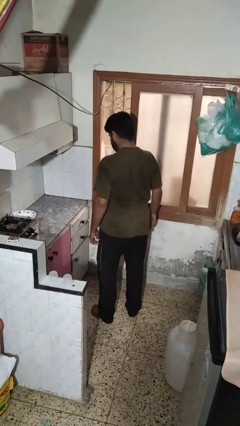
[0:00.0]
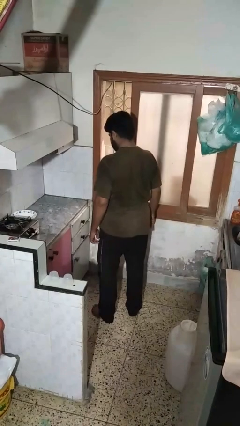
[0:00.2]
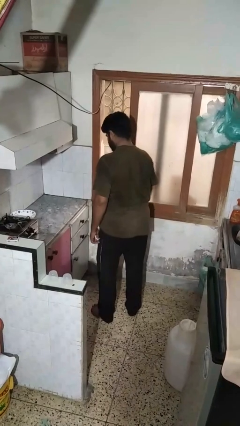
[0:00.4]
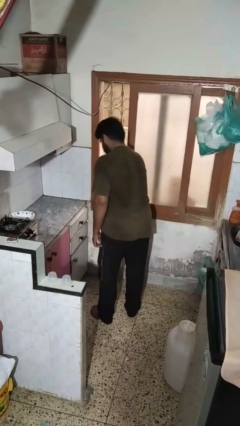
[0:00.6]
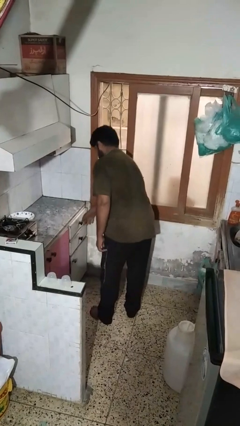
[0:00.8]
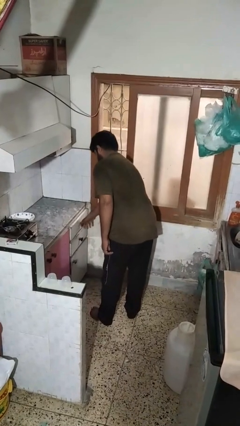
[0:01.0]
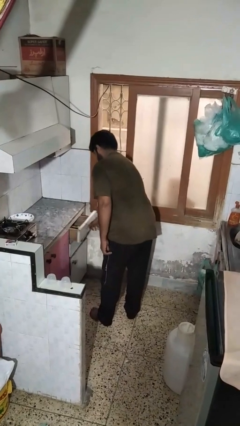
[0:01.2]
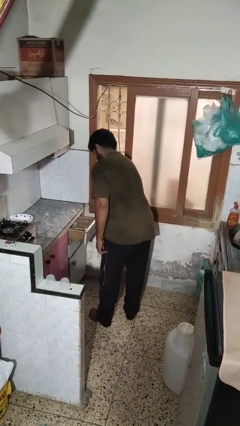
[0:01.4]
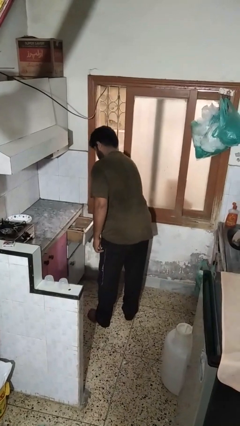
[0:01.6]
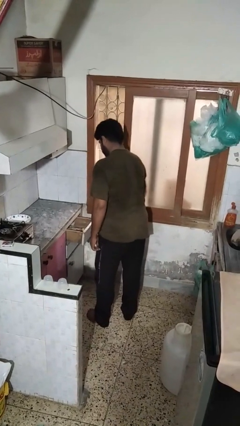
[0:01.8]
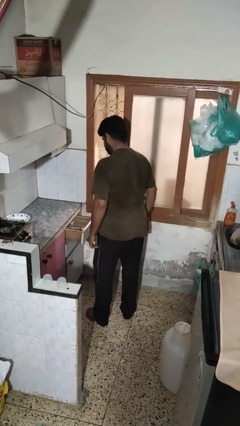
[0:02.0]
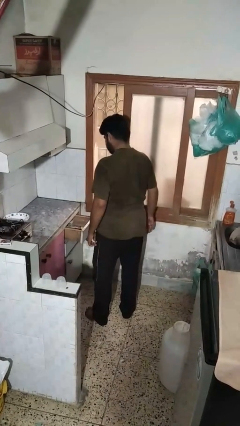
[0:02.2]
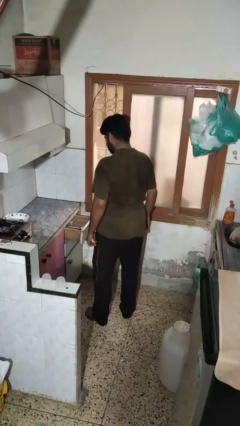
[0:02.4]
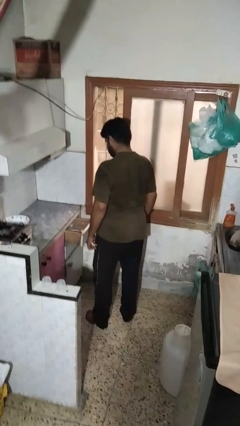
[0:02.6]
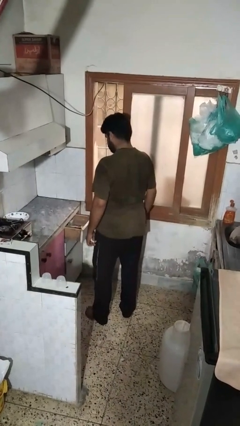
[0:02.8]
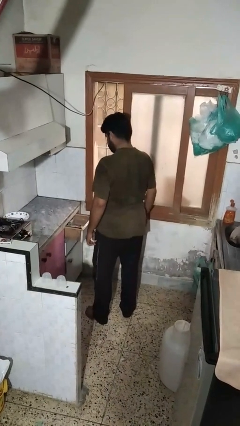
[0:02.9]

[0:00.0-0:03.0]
person opens kitchen drawer

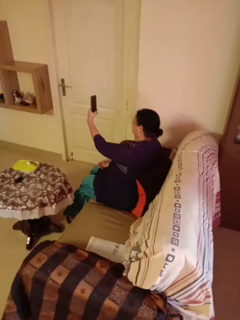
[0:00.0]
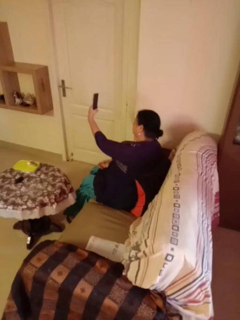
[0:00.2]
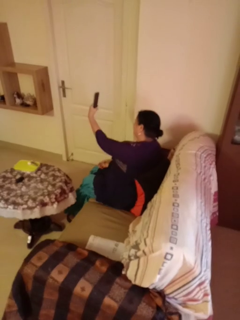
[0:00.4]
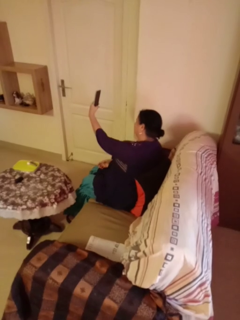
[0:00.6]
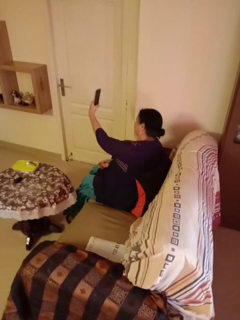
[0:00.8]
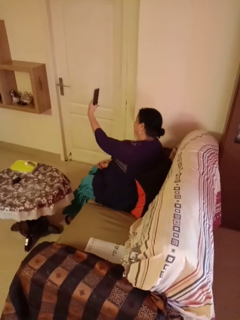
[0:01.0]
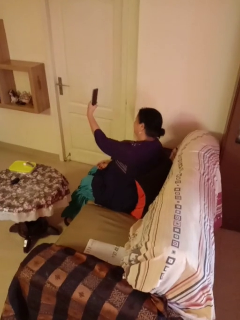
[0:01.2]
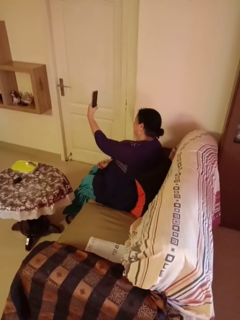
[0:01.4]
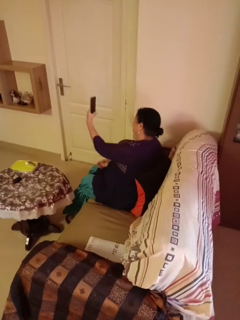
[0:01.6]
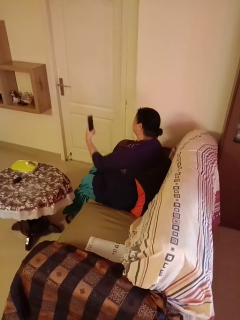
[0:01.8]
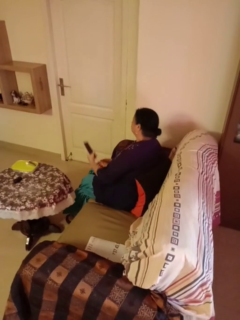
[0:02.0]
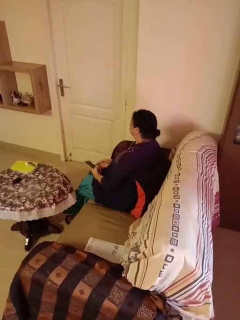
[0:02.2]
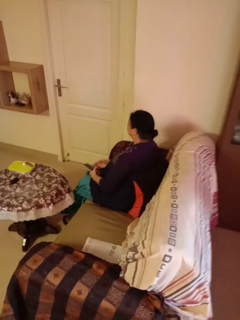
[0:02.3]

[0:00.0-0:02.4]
person takes selfie

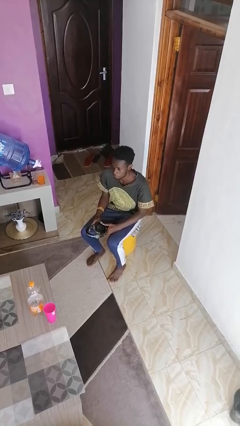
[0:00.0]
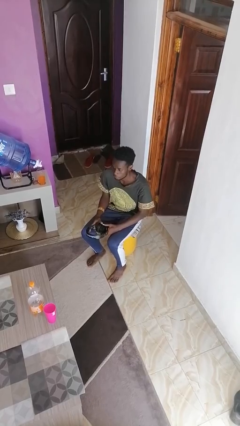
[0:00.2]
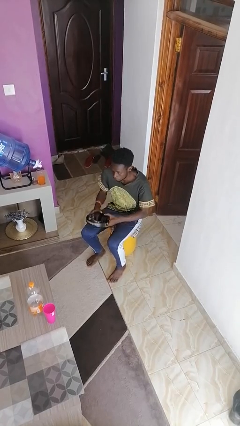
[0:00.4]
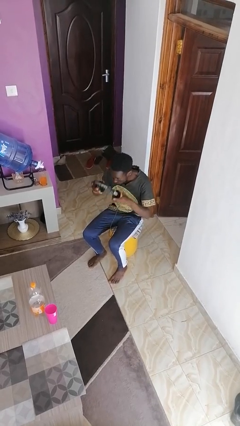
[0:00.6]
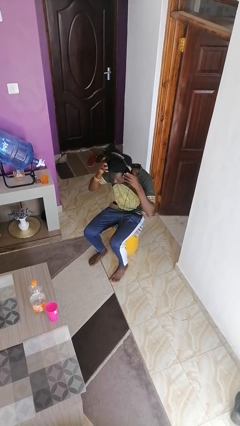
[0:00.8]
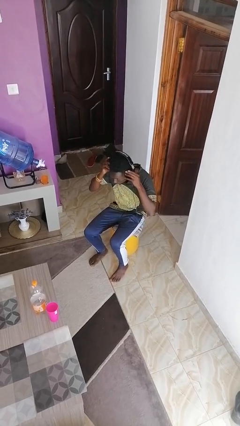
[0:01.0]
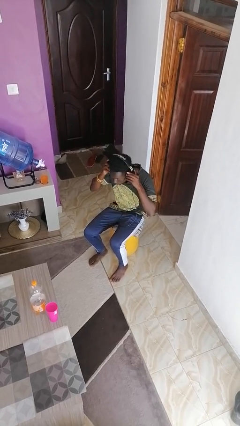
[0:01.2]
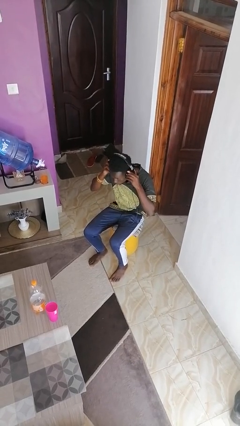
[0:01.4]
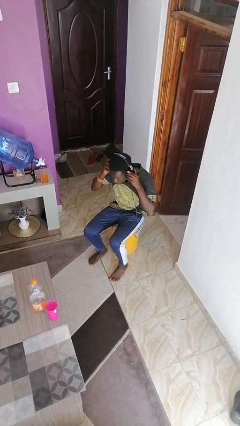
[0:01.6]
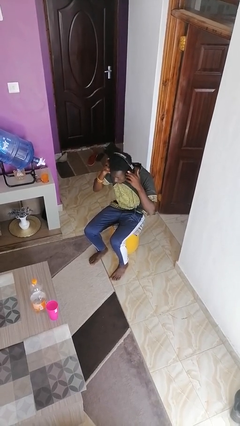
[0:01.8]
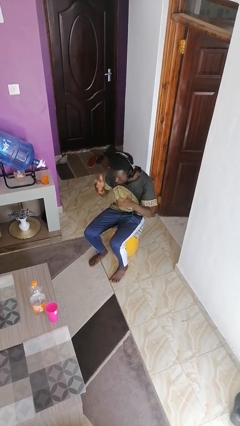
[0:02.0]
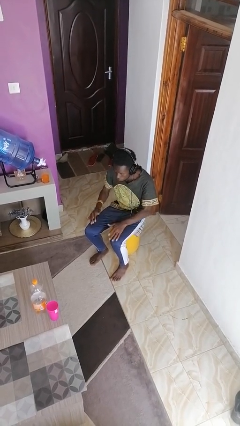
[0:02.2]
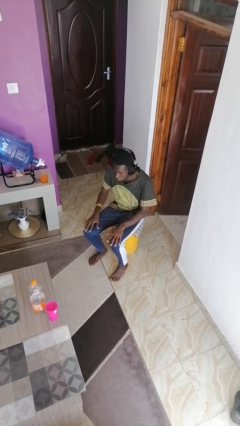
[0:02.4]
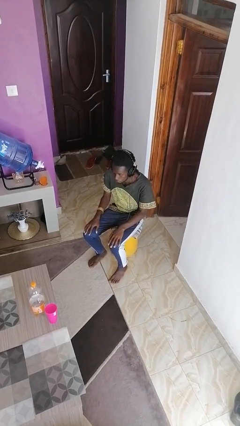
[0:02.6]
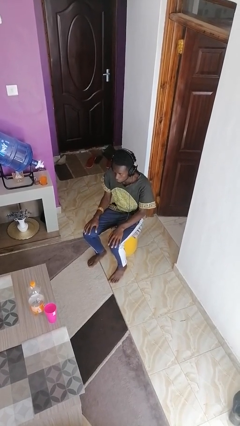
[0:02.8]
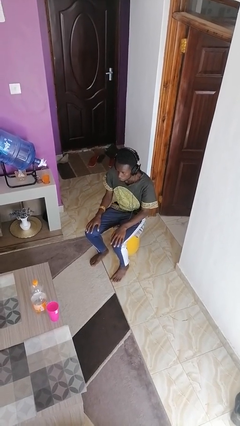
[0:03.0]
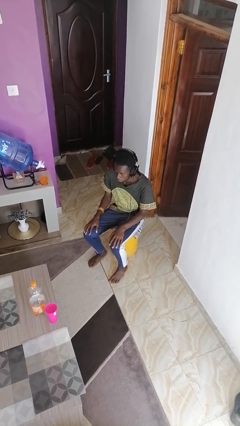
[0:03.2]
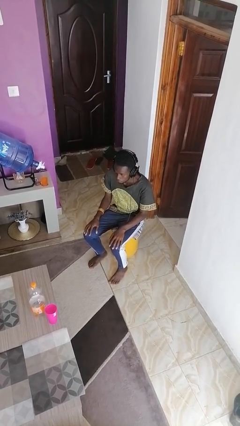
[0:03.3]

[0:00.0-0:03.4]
person puts on headphones

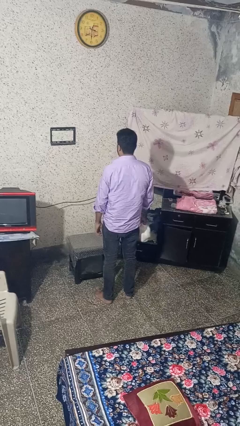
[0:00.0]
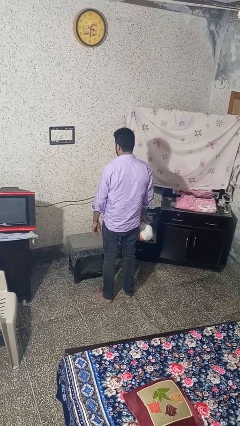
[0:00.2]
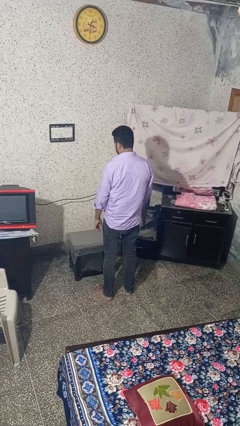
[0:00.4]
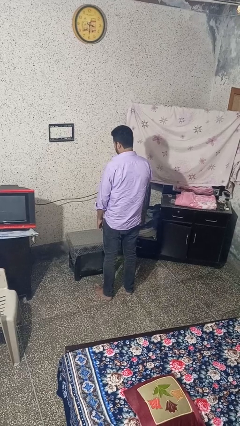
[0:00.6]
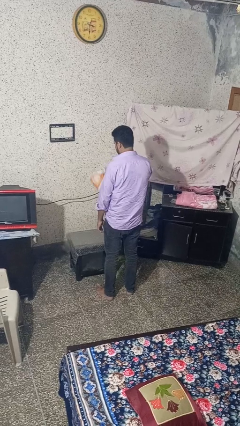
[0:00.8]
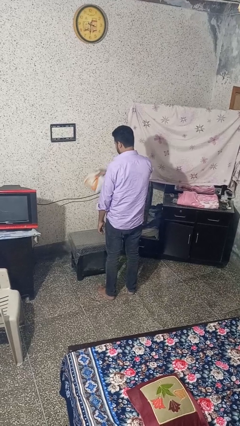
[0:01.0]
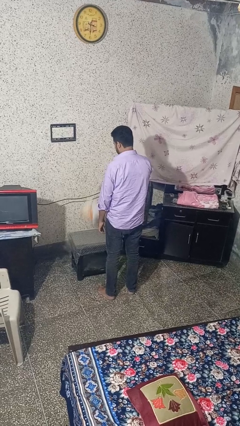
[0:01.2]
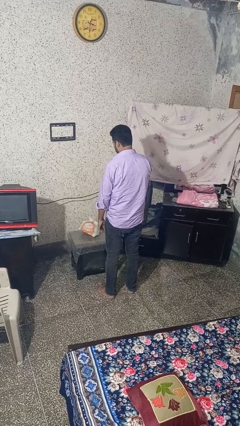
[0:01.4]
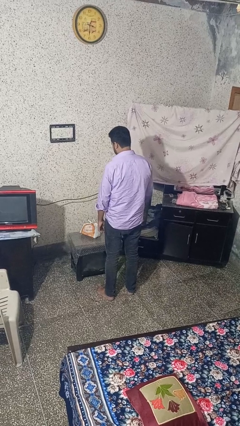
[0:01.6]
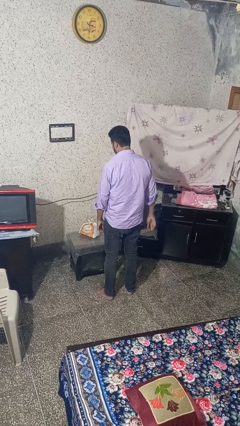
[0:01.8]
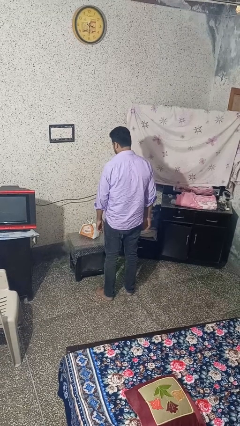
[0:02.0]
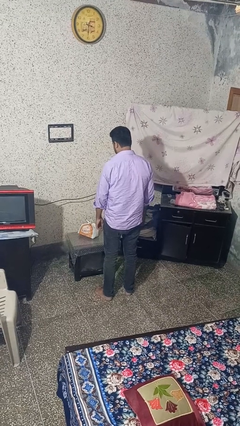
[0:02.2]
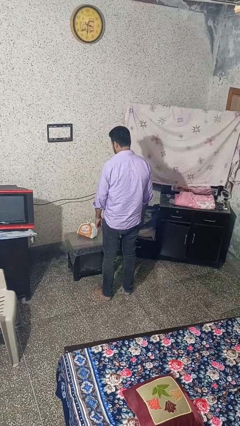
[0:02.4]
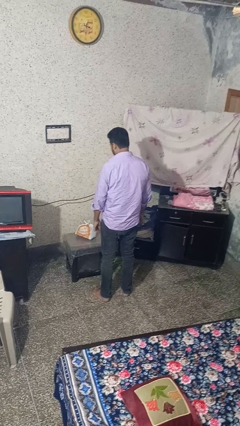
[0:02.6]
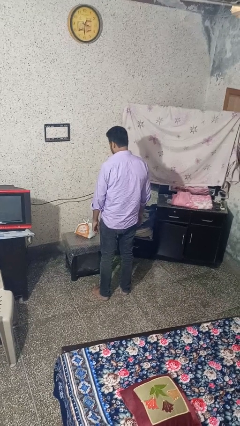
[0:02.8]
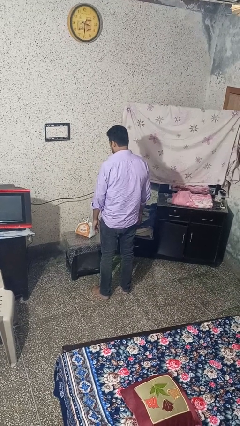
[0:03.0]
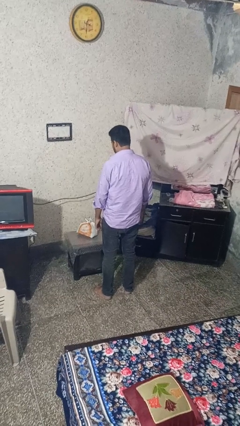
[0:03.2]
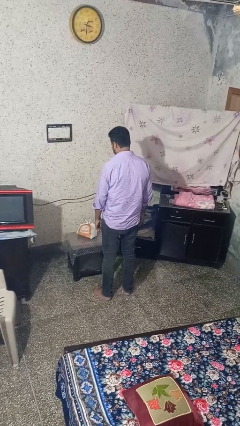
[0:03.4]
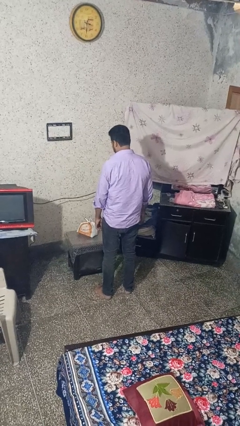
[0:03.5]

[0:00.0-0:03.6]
person throws object on table

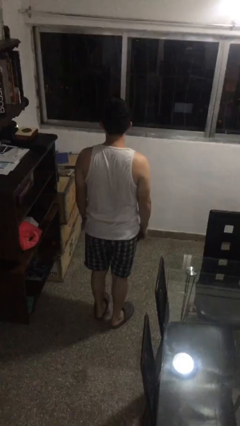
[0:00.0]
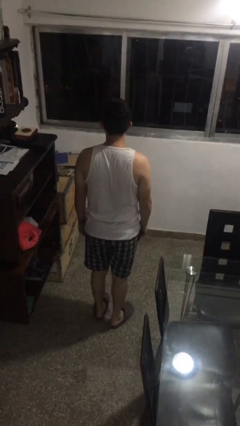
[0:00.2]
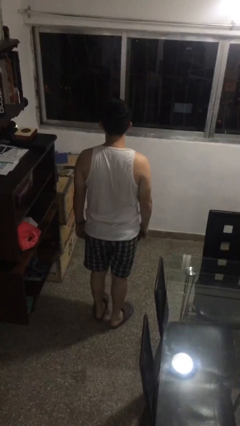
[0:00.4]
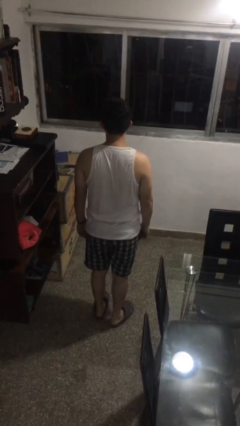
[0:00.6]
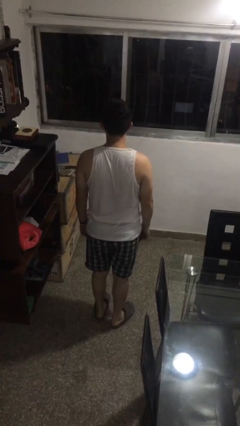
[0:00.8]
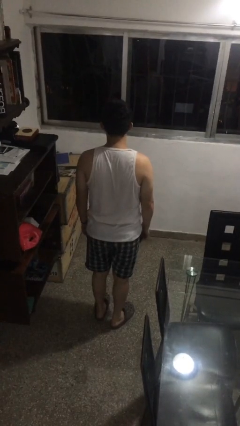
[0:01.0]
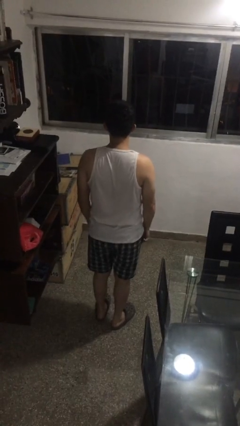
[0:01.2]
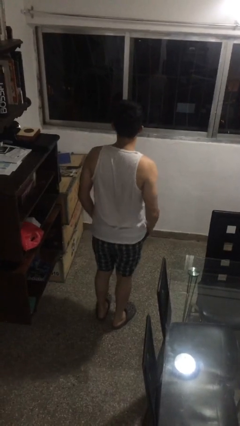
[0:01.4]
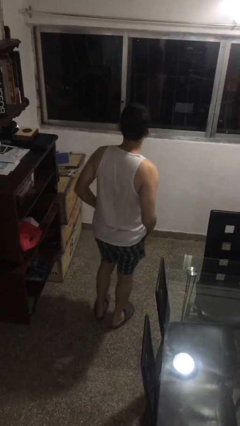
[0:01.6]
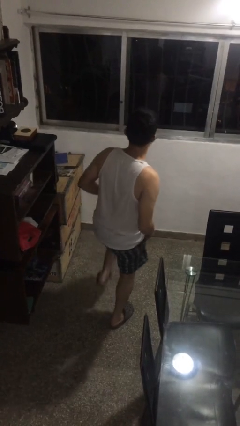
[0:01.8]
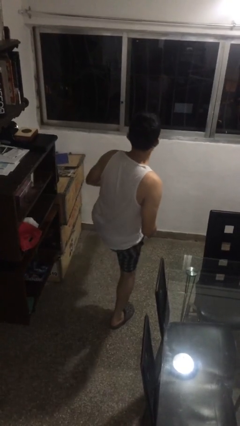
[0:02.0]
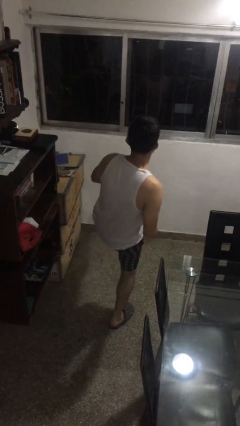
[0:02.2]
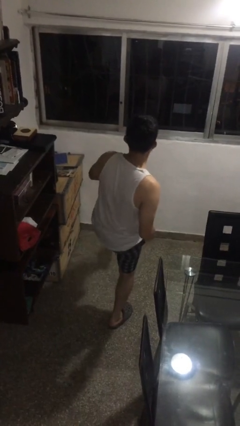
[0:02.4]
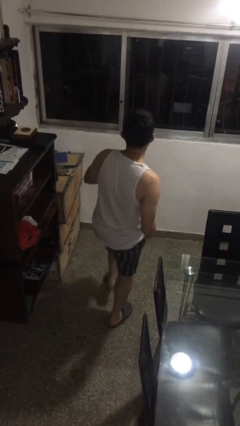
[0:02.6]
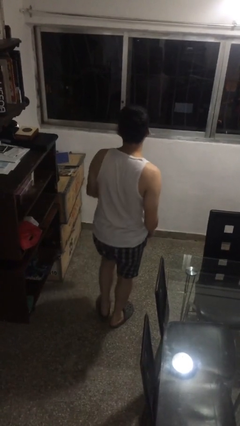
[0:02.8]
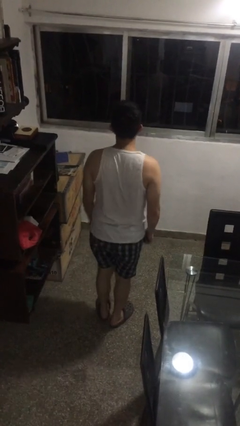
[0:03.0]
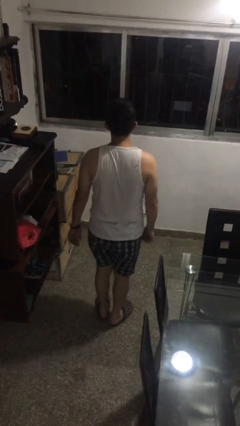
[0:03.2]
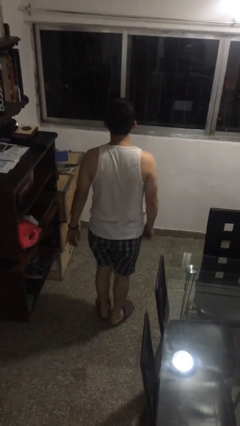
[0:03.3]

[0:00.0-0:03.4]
person karate kicks

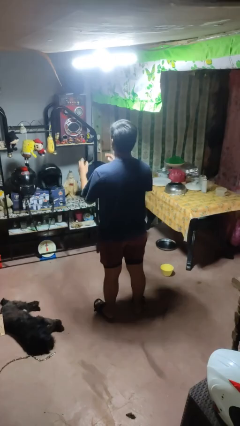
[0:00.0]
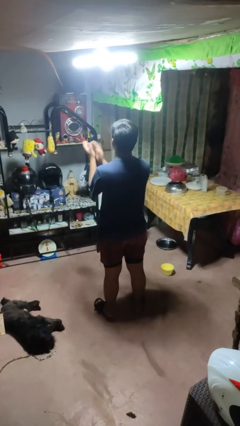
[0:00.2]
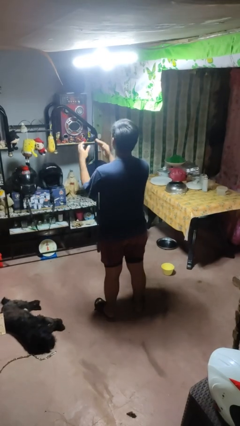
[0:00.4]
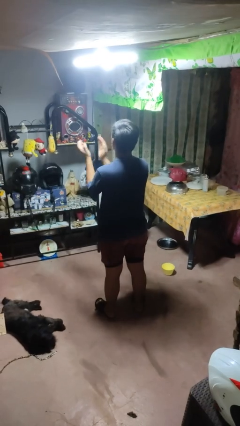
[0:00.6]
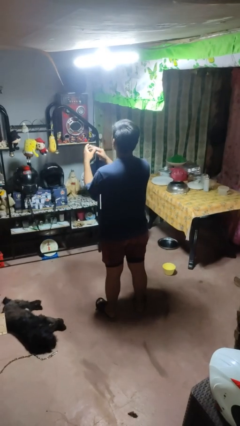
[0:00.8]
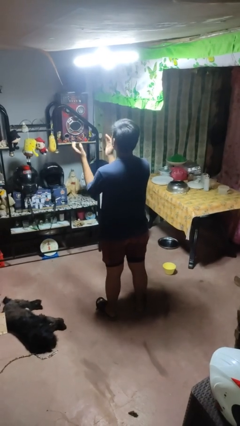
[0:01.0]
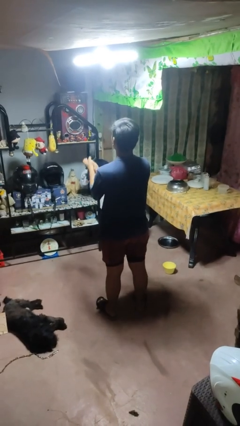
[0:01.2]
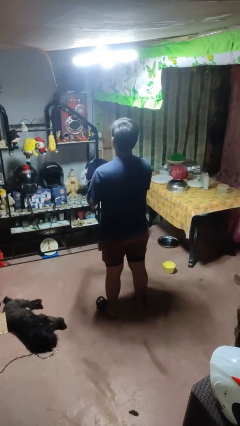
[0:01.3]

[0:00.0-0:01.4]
person claps hands

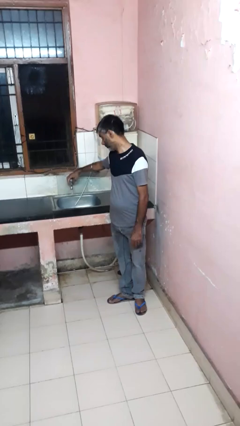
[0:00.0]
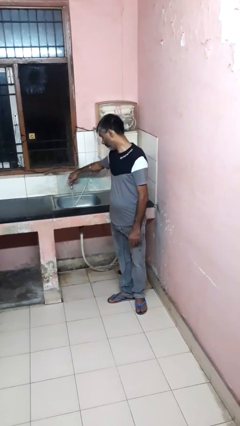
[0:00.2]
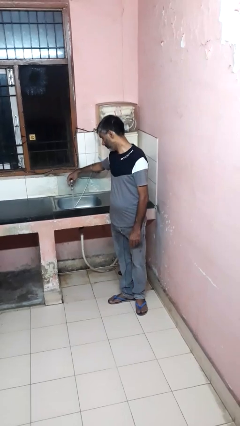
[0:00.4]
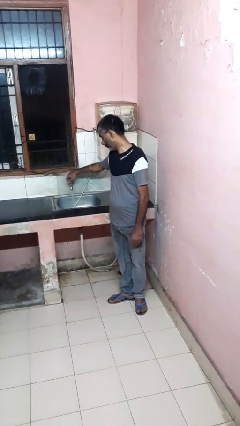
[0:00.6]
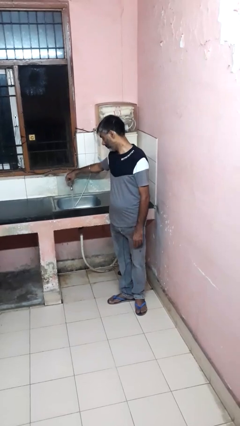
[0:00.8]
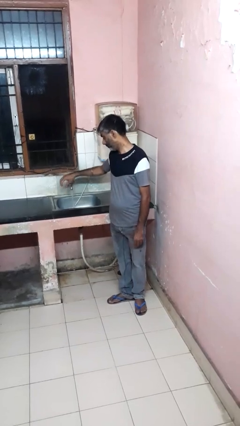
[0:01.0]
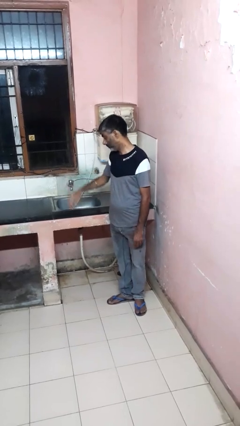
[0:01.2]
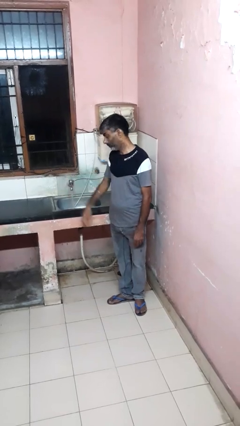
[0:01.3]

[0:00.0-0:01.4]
person turns on faucet
